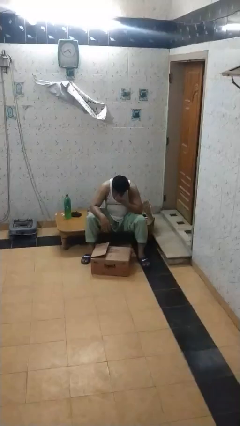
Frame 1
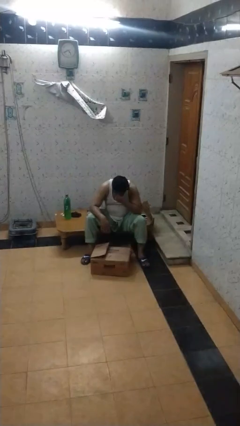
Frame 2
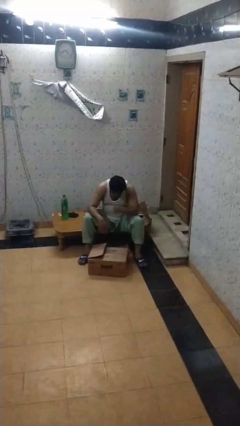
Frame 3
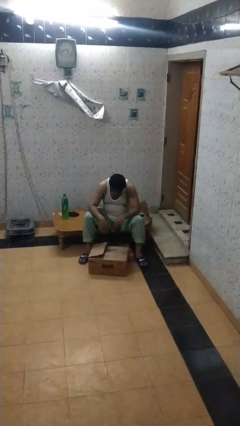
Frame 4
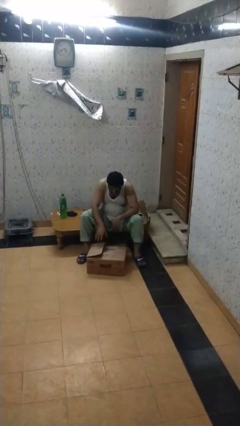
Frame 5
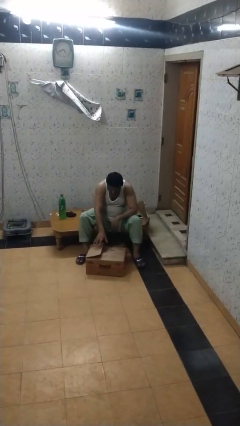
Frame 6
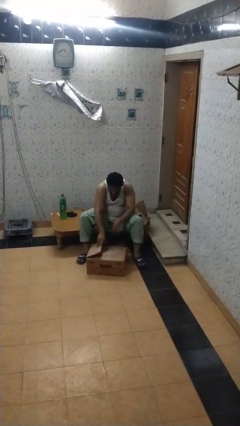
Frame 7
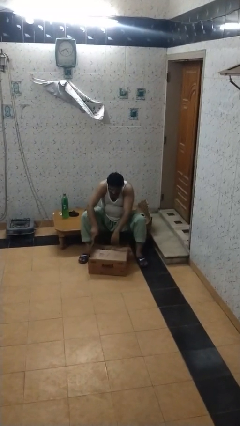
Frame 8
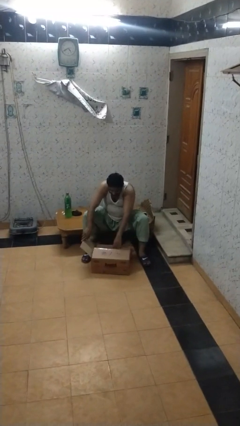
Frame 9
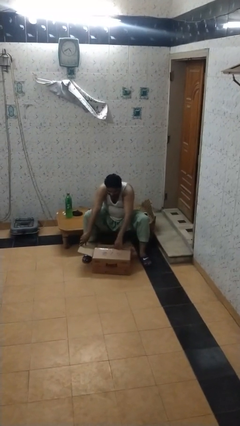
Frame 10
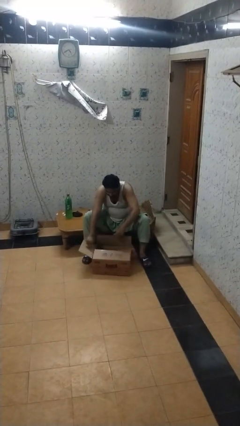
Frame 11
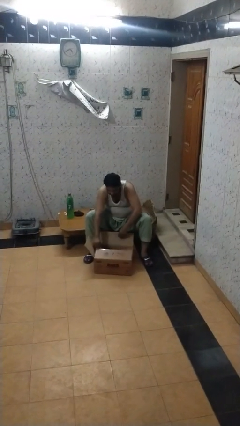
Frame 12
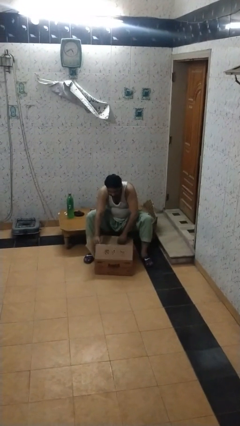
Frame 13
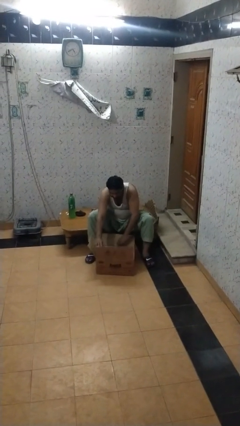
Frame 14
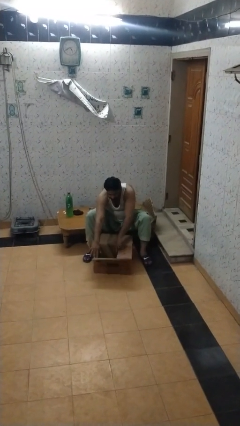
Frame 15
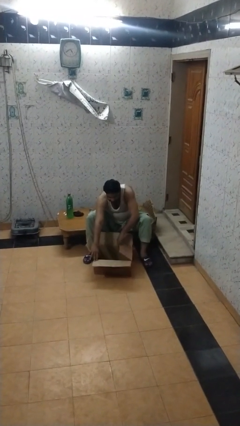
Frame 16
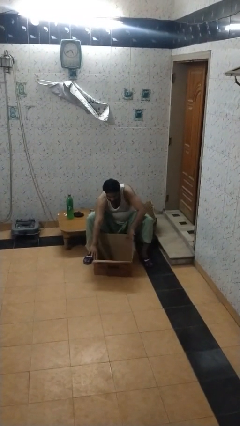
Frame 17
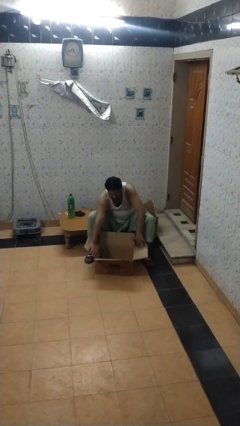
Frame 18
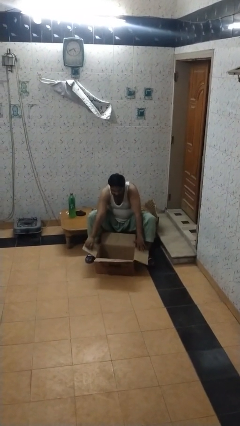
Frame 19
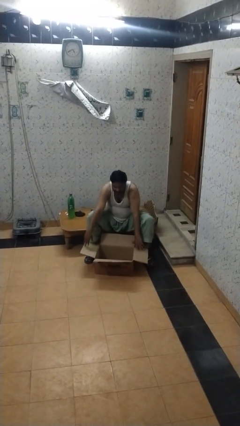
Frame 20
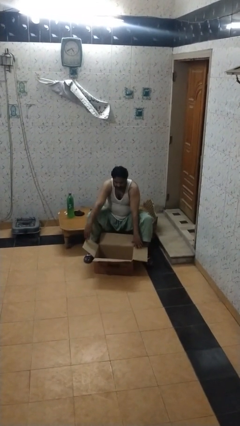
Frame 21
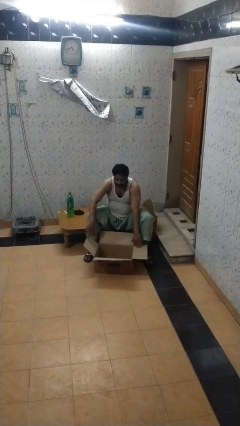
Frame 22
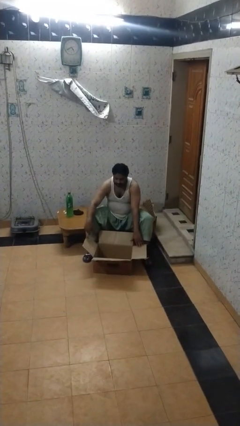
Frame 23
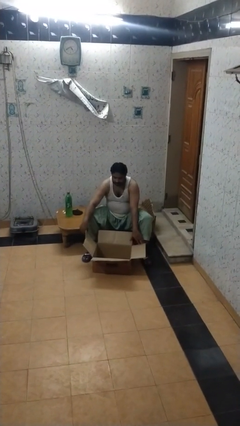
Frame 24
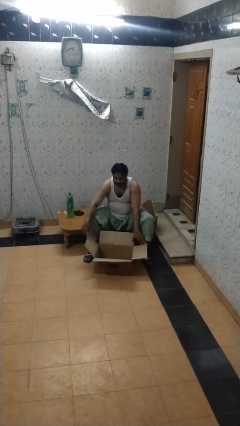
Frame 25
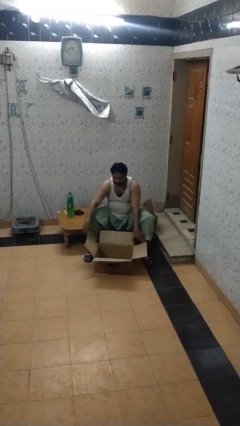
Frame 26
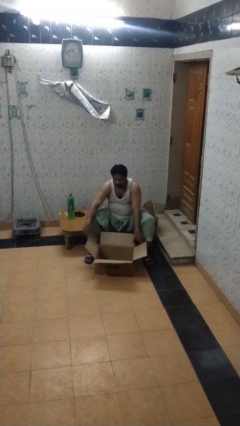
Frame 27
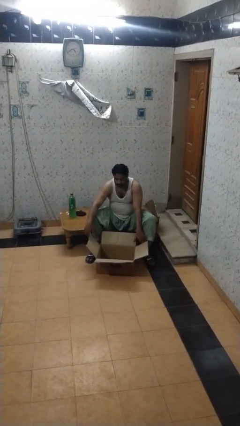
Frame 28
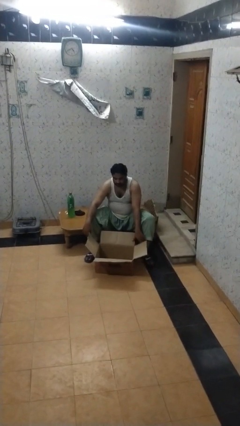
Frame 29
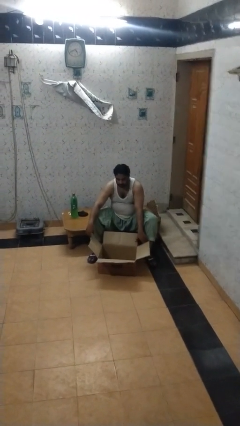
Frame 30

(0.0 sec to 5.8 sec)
person opens box

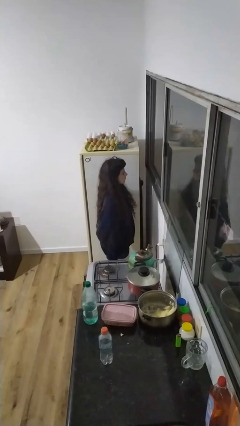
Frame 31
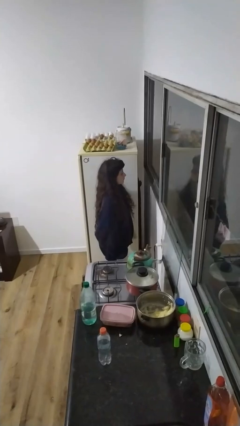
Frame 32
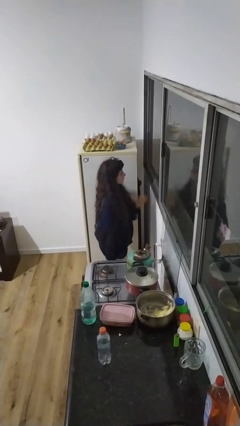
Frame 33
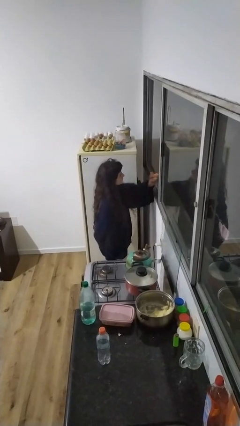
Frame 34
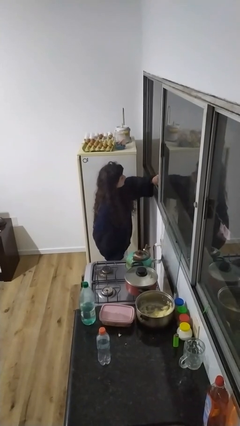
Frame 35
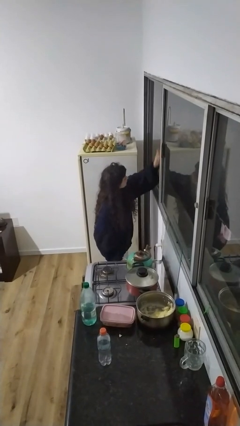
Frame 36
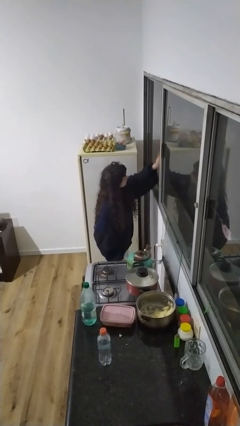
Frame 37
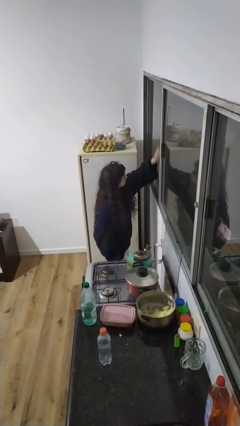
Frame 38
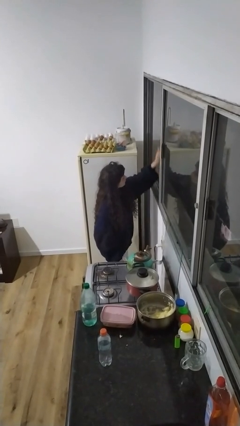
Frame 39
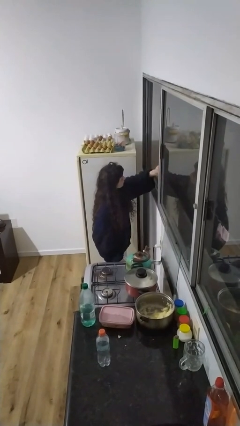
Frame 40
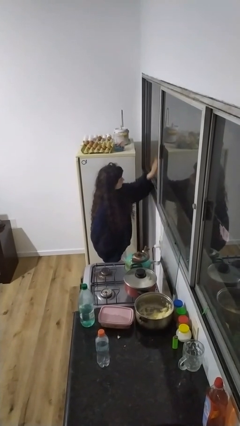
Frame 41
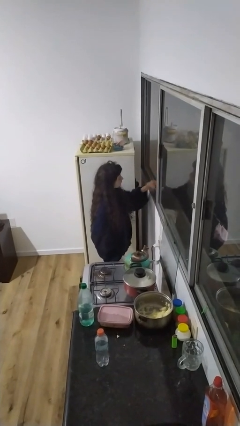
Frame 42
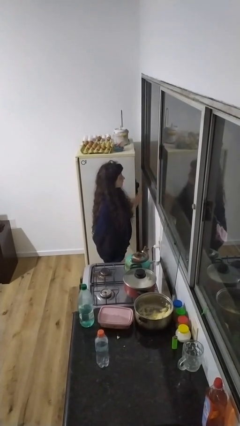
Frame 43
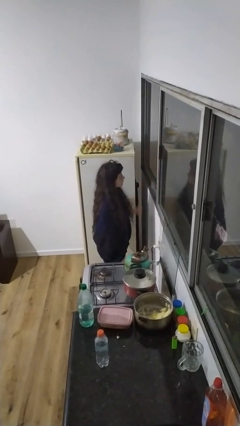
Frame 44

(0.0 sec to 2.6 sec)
person washes window

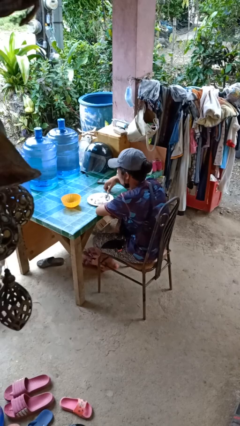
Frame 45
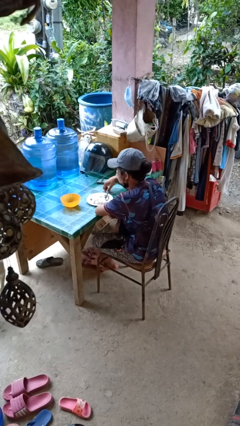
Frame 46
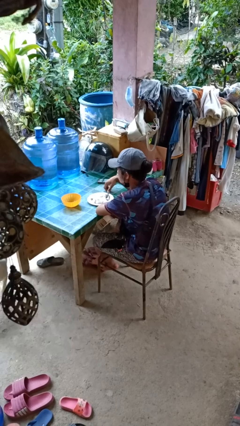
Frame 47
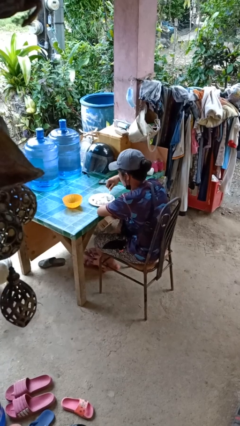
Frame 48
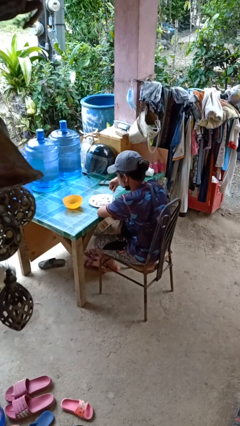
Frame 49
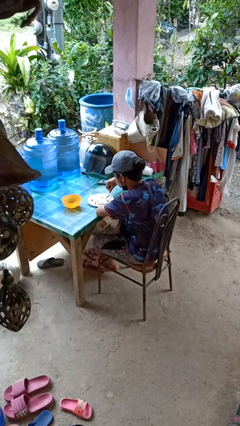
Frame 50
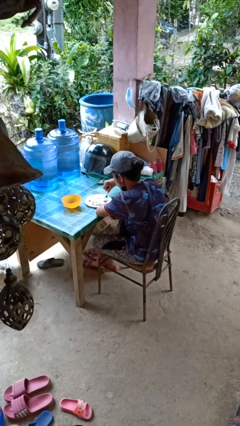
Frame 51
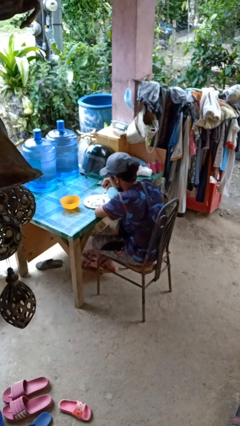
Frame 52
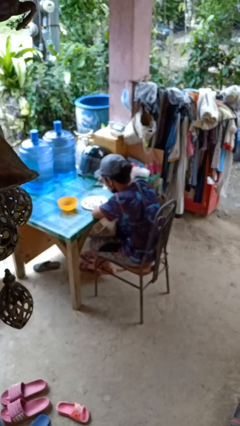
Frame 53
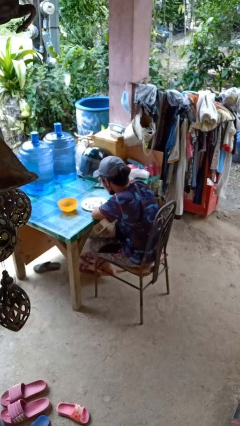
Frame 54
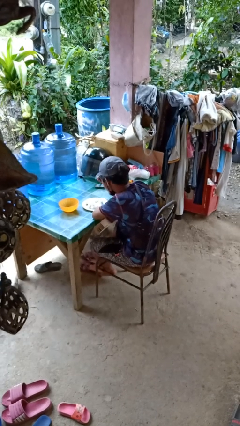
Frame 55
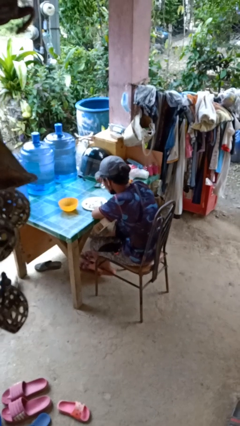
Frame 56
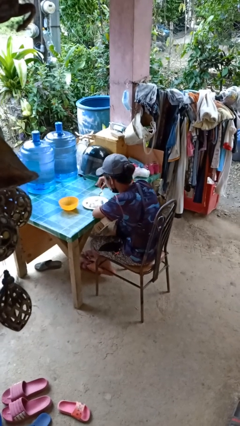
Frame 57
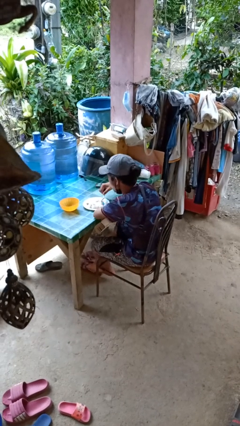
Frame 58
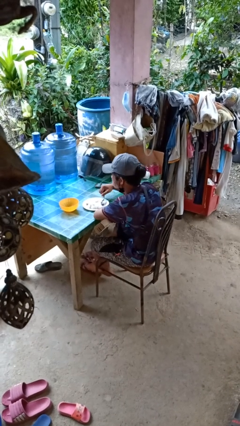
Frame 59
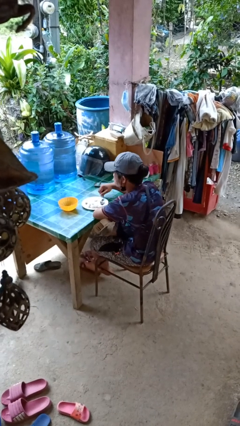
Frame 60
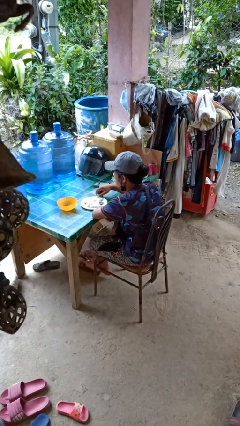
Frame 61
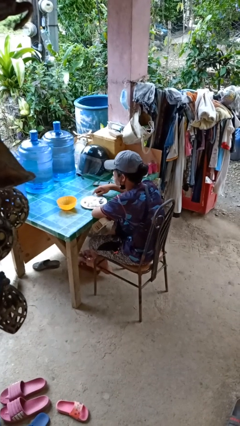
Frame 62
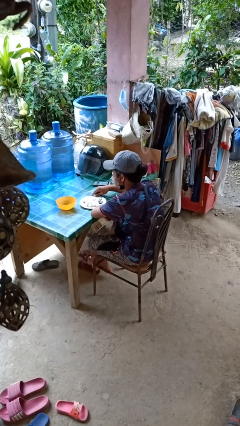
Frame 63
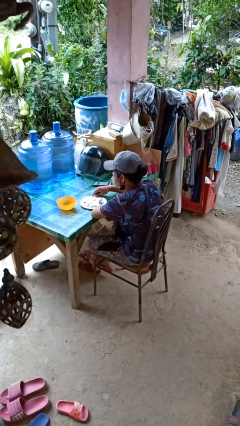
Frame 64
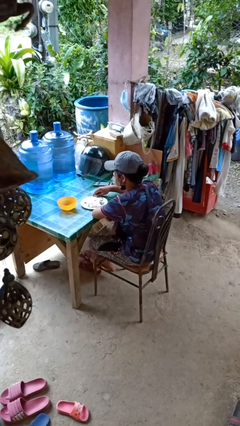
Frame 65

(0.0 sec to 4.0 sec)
person eats with utensil

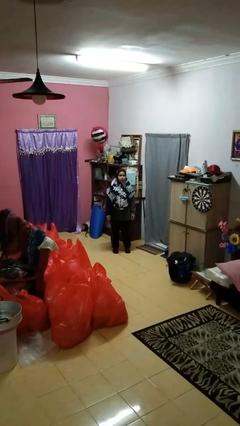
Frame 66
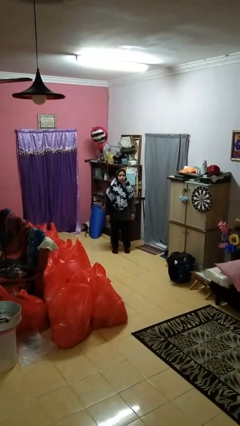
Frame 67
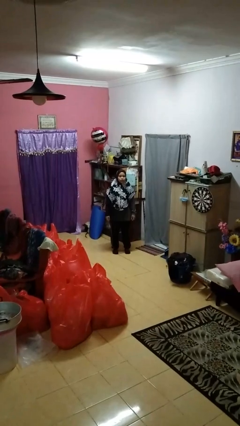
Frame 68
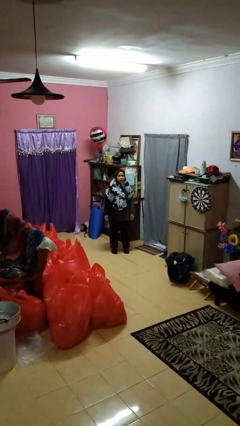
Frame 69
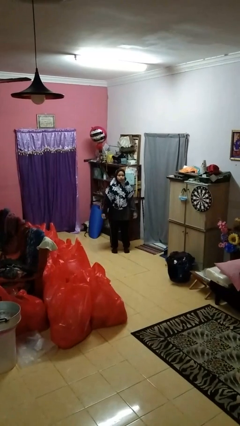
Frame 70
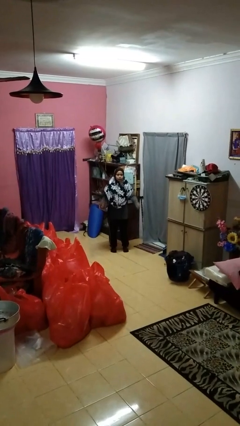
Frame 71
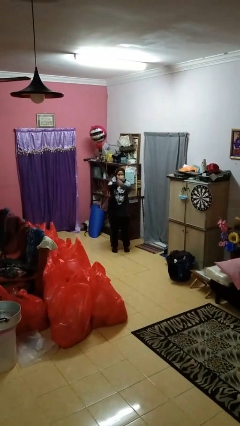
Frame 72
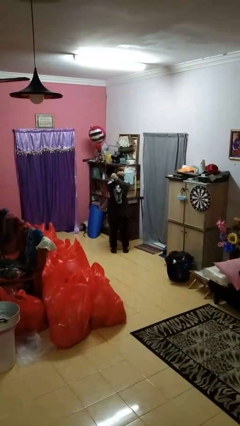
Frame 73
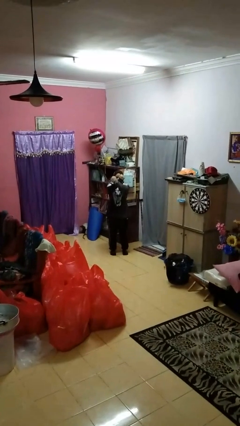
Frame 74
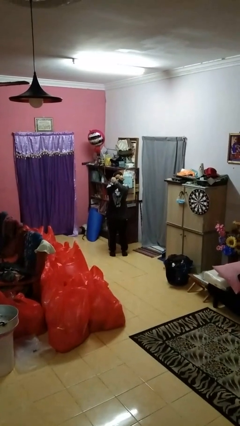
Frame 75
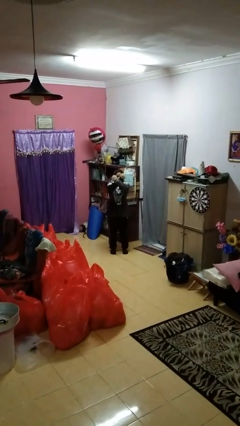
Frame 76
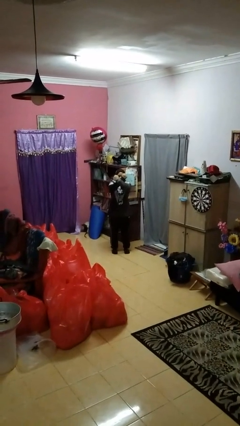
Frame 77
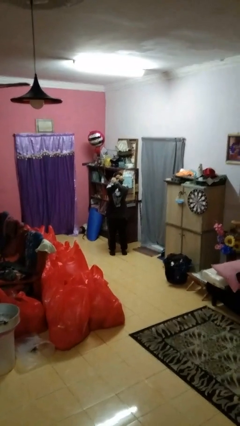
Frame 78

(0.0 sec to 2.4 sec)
person crosses arms

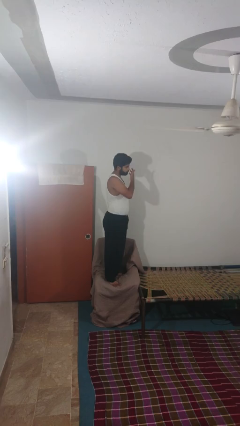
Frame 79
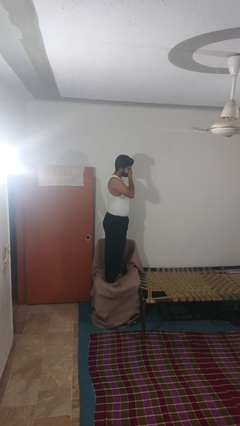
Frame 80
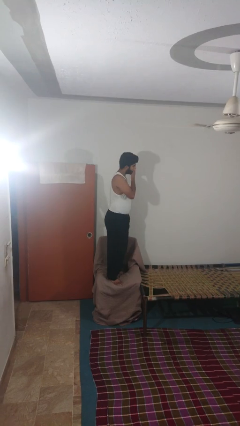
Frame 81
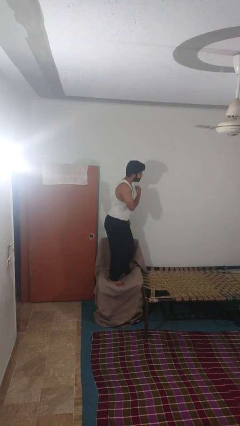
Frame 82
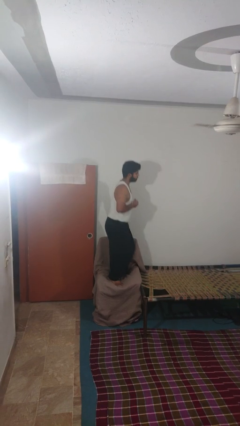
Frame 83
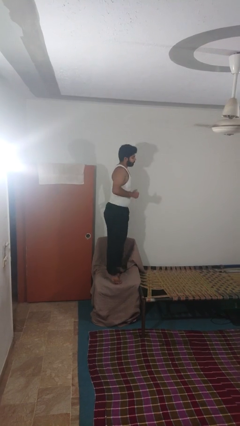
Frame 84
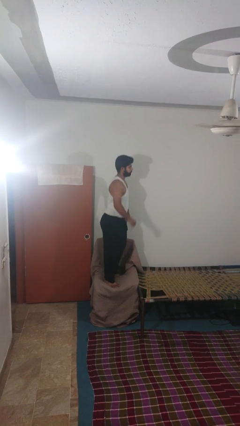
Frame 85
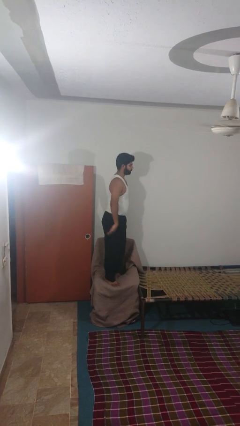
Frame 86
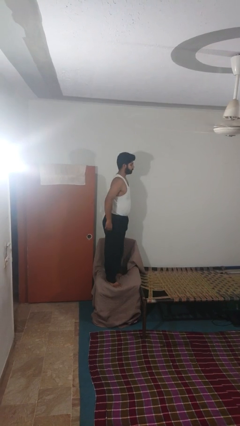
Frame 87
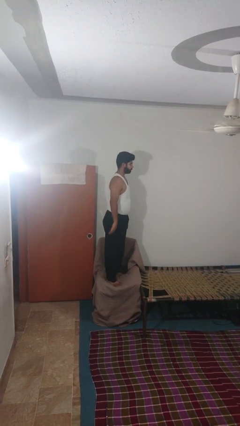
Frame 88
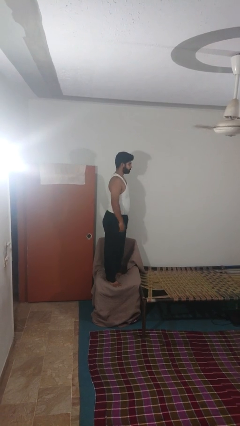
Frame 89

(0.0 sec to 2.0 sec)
person jumps on couch

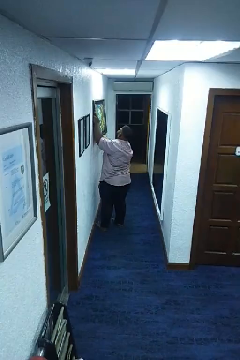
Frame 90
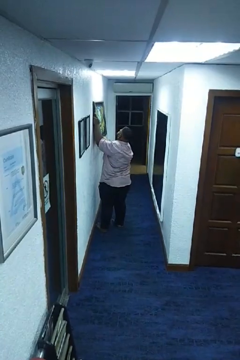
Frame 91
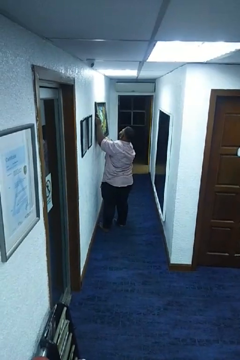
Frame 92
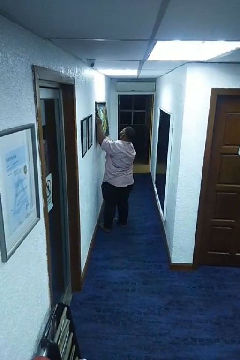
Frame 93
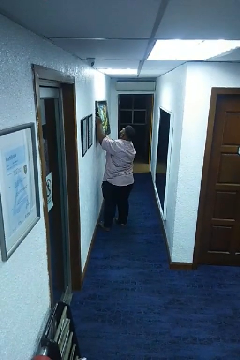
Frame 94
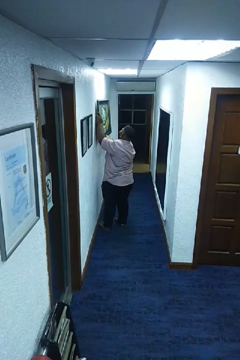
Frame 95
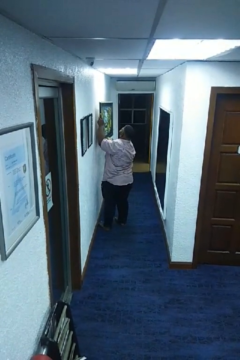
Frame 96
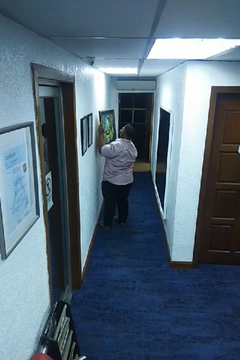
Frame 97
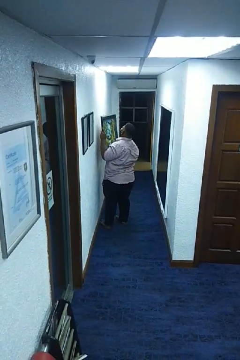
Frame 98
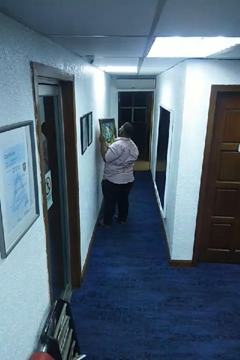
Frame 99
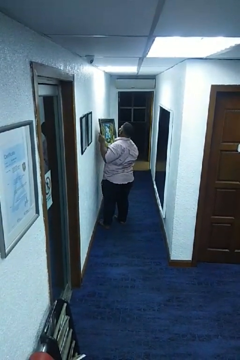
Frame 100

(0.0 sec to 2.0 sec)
person takes down picture frame
